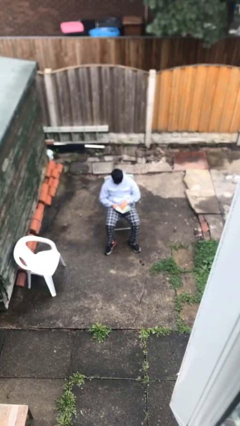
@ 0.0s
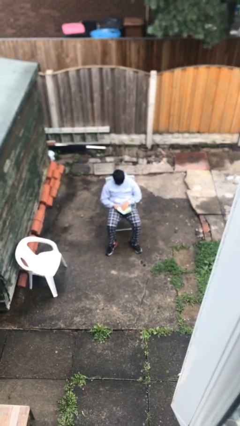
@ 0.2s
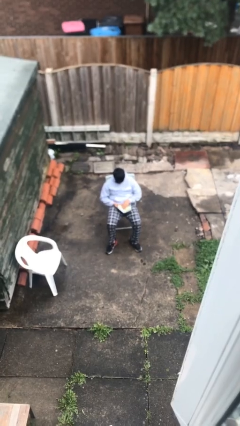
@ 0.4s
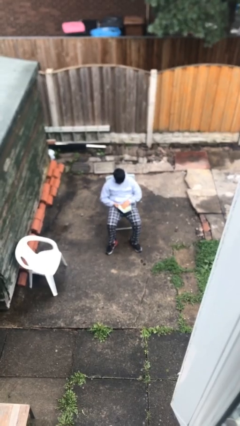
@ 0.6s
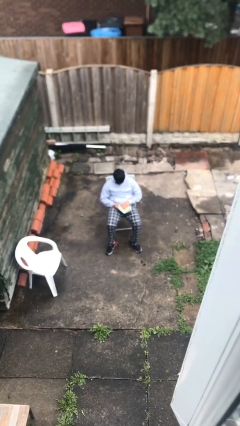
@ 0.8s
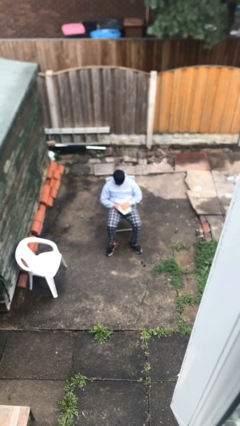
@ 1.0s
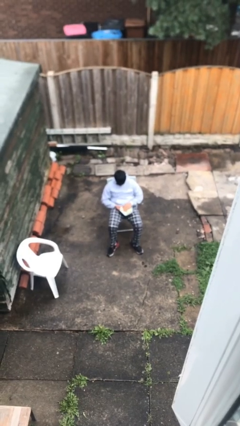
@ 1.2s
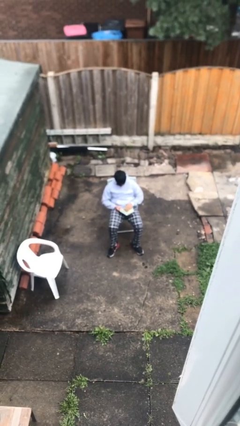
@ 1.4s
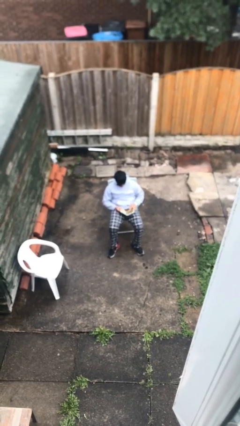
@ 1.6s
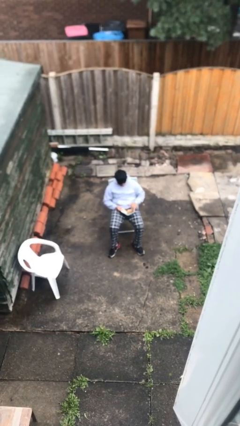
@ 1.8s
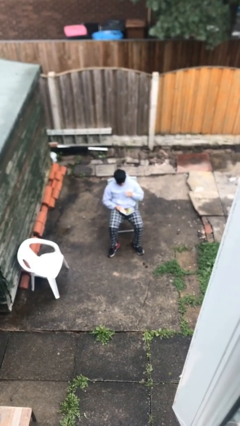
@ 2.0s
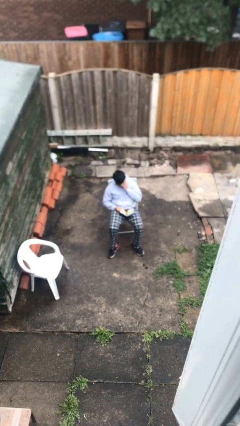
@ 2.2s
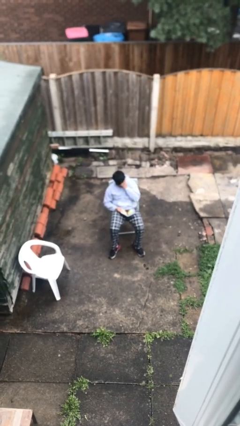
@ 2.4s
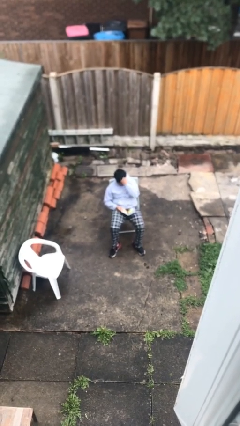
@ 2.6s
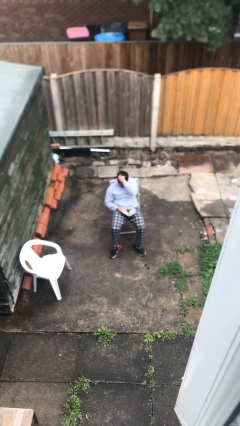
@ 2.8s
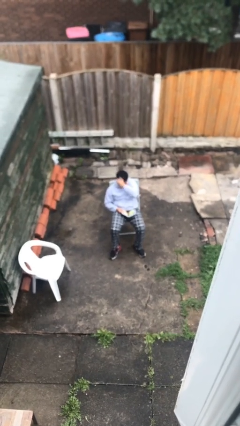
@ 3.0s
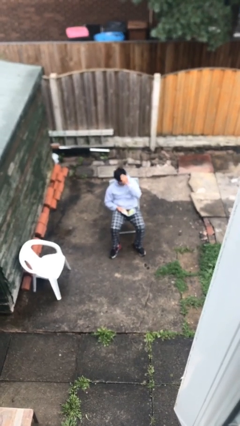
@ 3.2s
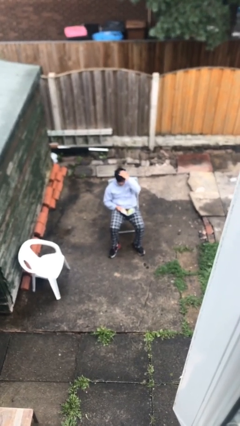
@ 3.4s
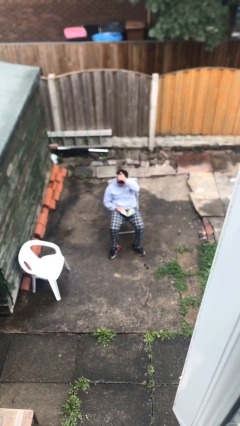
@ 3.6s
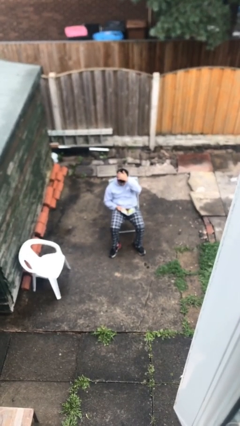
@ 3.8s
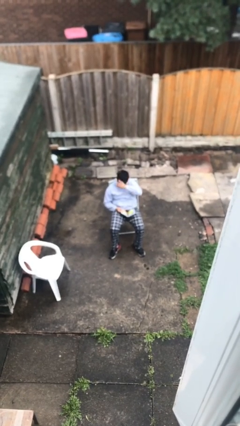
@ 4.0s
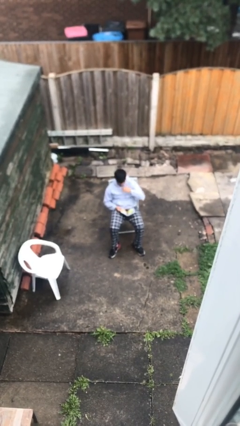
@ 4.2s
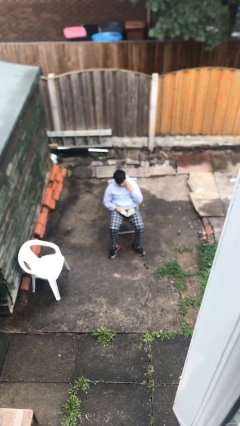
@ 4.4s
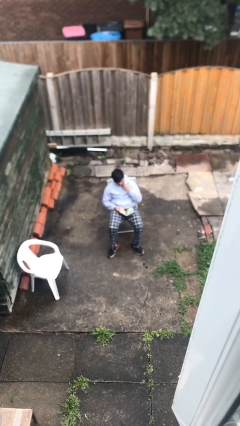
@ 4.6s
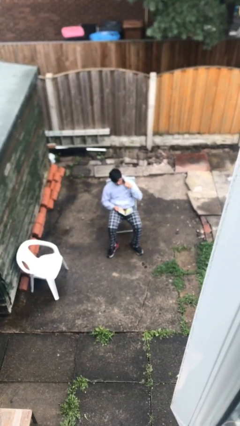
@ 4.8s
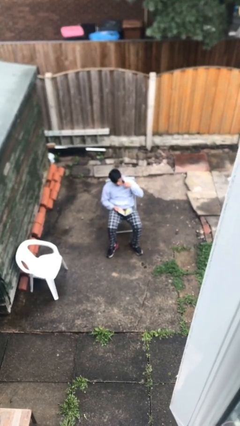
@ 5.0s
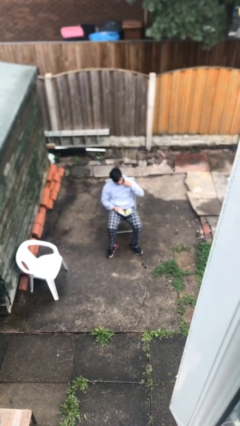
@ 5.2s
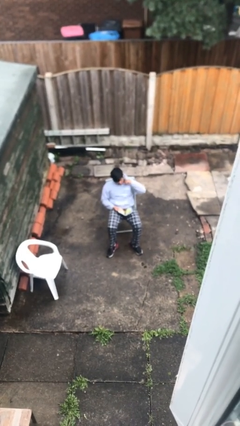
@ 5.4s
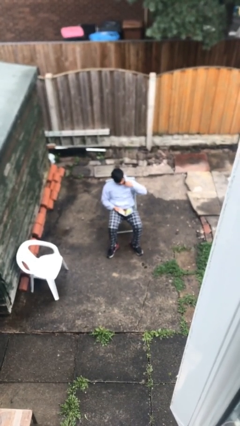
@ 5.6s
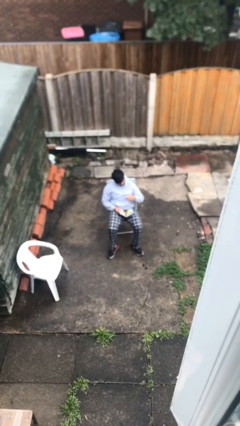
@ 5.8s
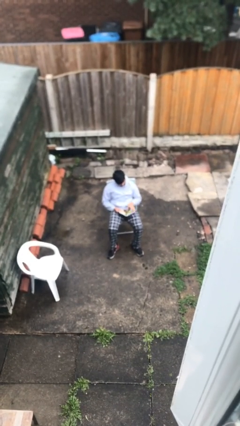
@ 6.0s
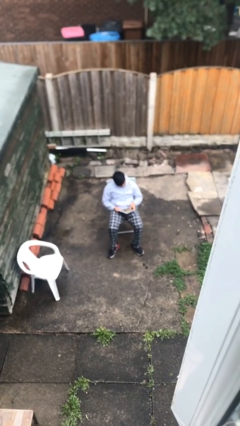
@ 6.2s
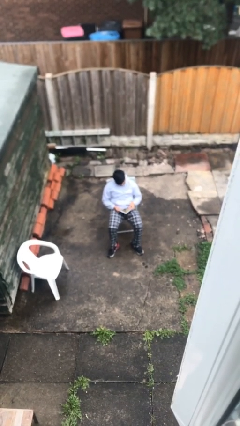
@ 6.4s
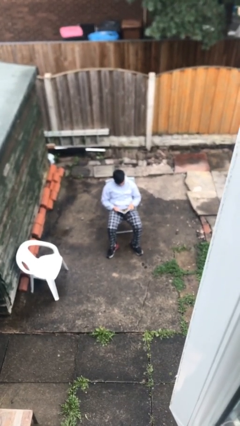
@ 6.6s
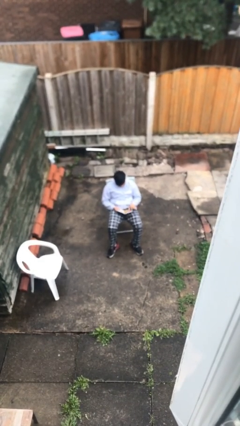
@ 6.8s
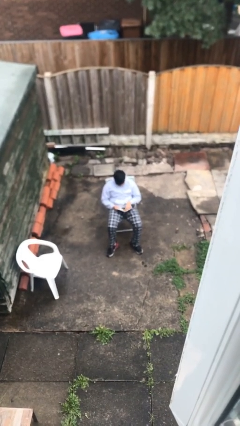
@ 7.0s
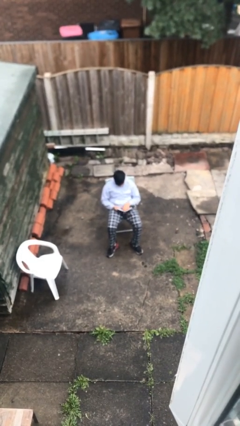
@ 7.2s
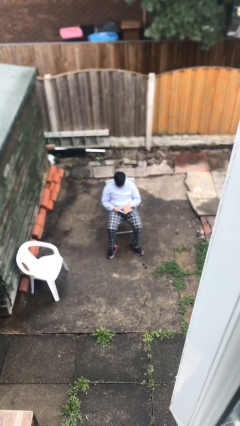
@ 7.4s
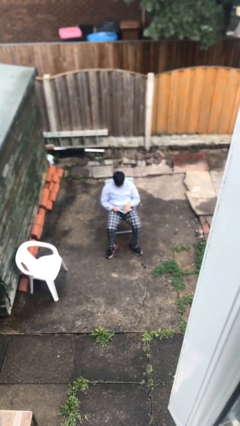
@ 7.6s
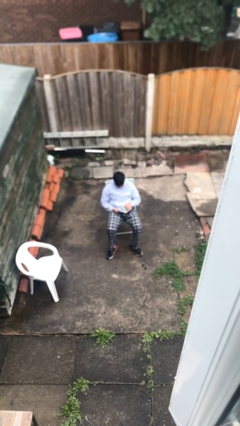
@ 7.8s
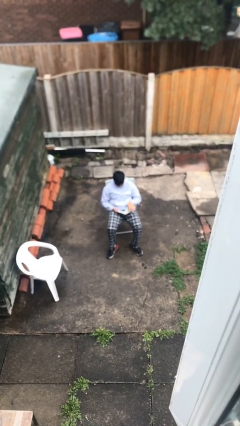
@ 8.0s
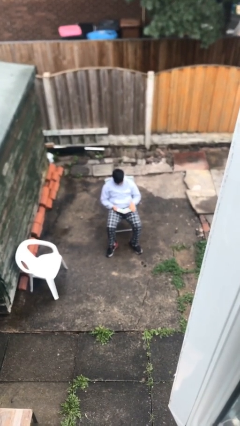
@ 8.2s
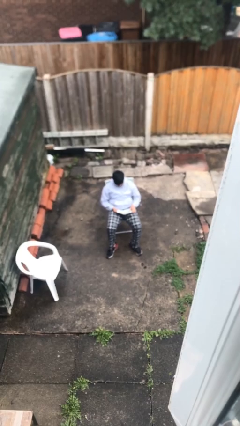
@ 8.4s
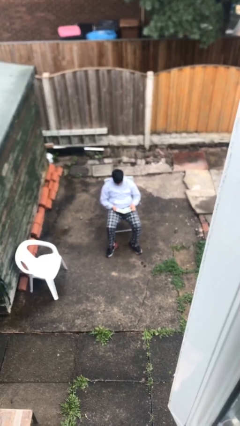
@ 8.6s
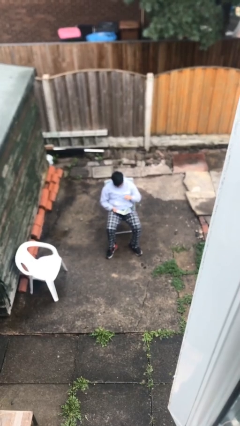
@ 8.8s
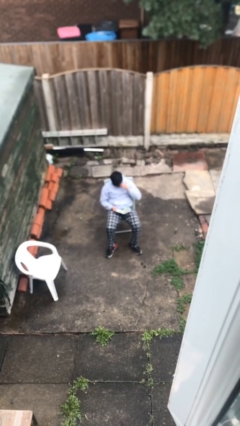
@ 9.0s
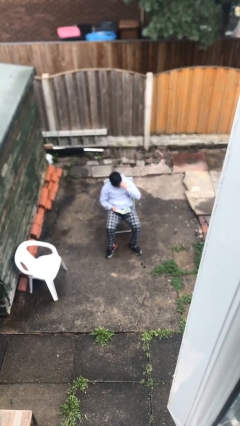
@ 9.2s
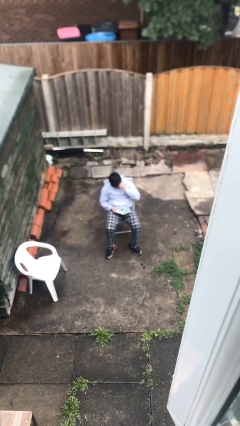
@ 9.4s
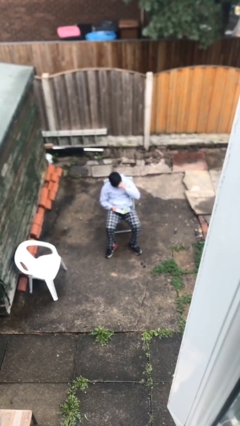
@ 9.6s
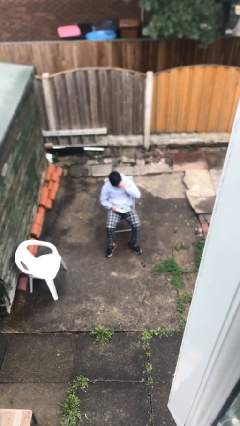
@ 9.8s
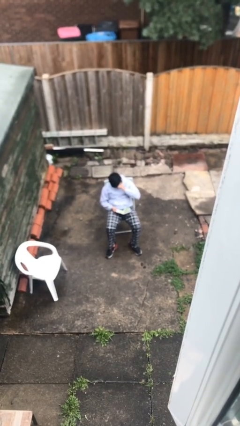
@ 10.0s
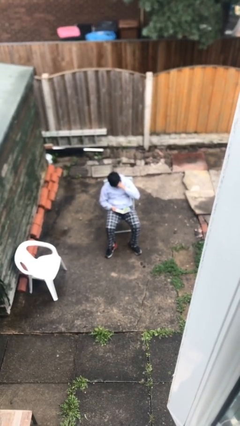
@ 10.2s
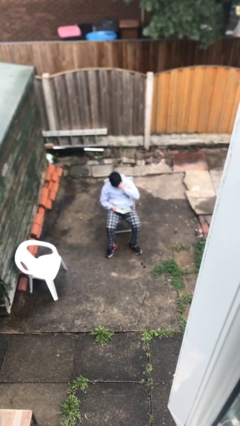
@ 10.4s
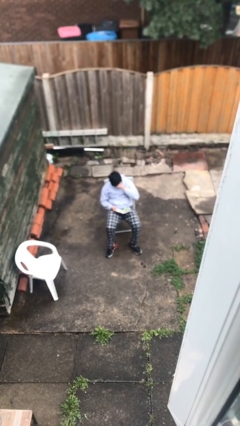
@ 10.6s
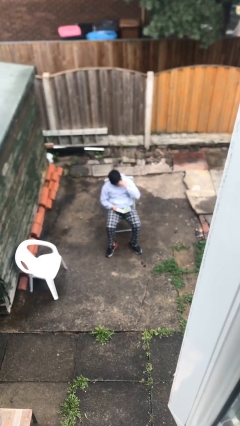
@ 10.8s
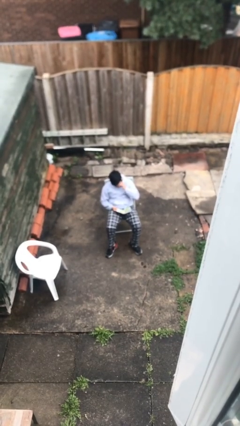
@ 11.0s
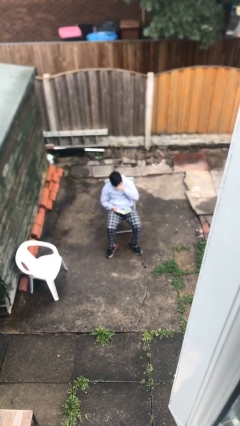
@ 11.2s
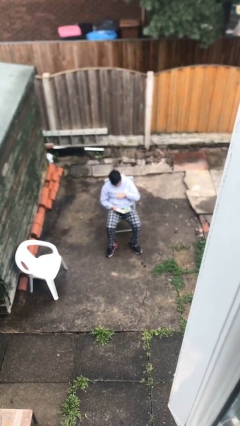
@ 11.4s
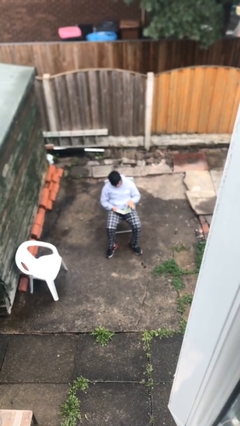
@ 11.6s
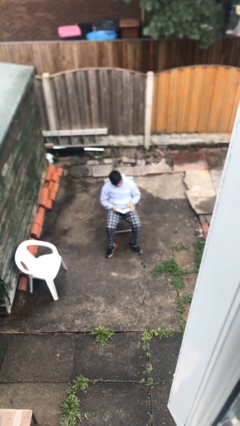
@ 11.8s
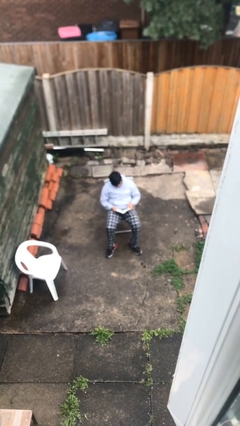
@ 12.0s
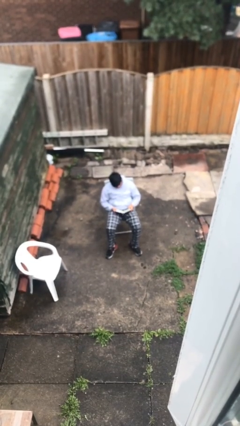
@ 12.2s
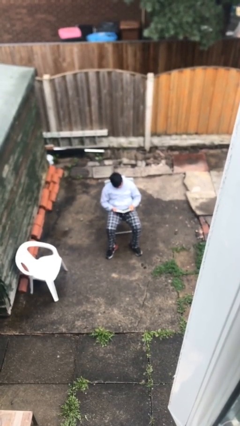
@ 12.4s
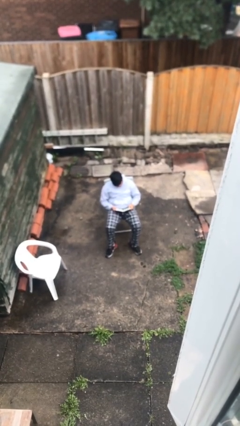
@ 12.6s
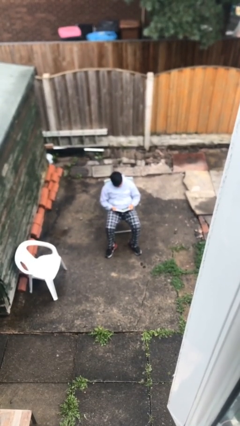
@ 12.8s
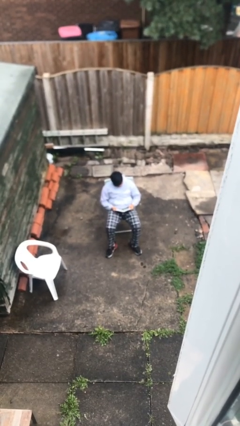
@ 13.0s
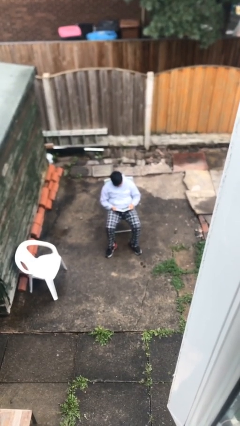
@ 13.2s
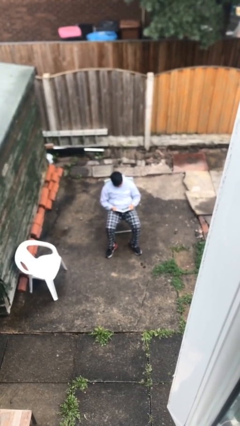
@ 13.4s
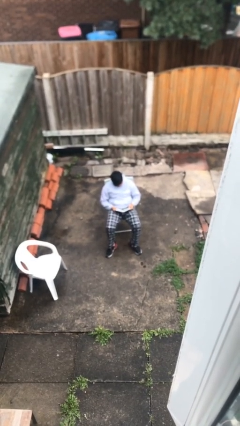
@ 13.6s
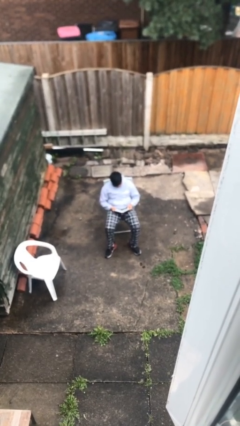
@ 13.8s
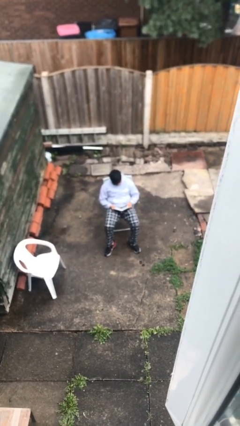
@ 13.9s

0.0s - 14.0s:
person reads document

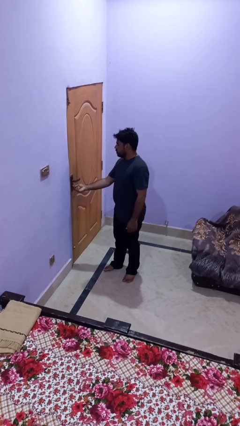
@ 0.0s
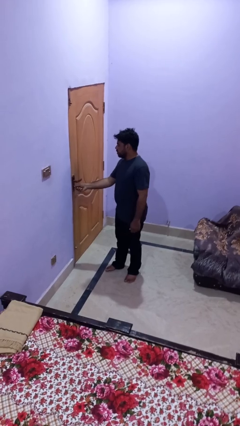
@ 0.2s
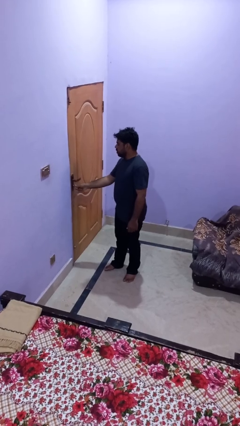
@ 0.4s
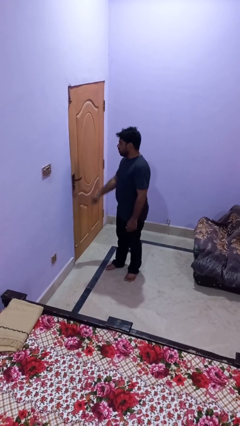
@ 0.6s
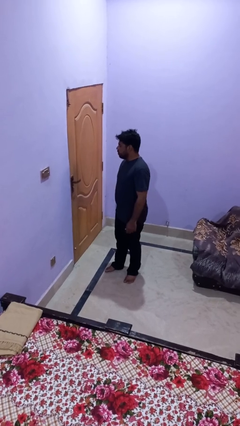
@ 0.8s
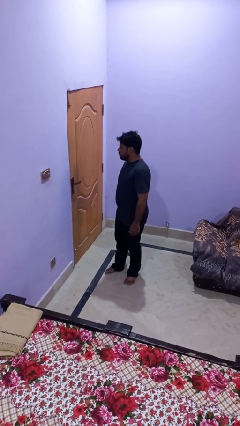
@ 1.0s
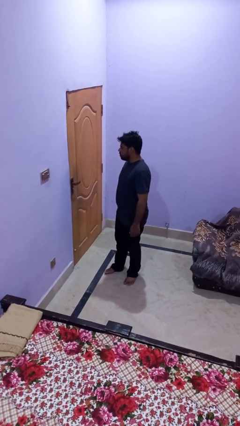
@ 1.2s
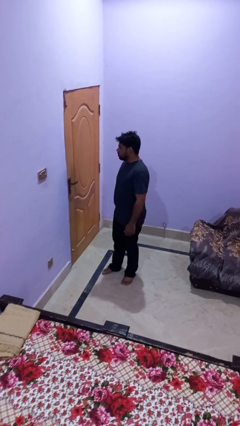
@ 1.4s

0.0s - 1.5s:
person locks door with keys

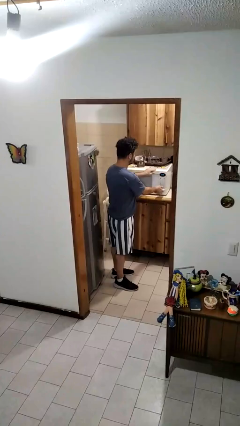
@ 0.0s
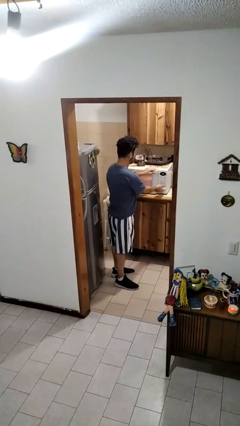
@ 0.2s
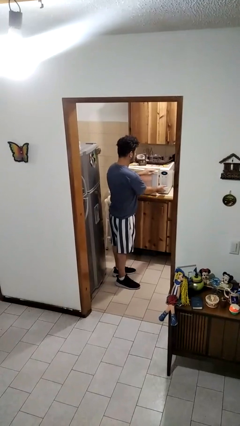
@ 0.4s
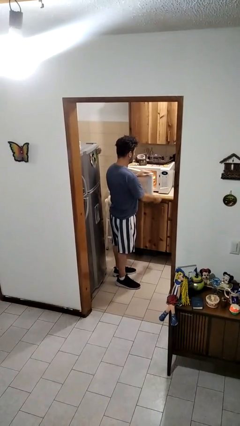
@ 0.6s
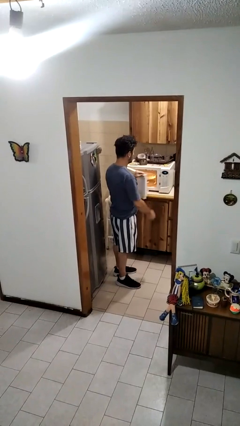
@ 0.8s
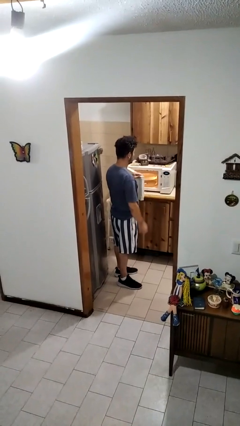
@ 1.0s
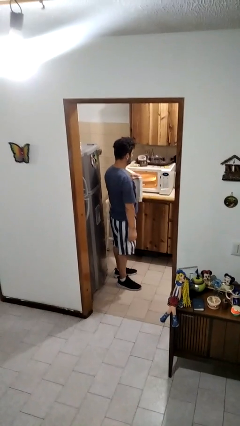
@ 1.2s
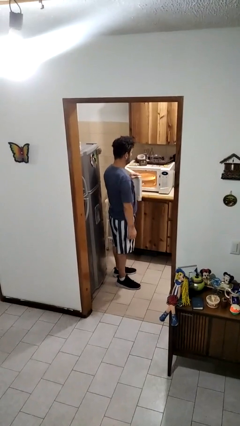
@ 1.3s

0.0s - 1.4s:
person opens microwave

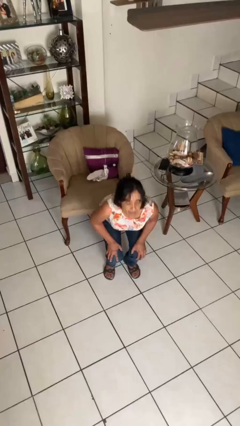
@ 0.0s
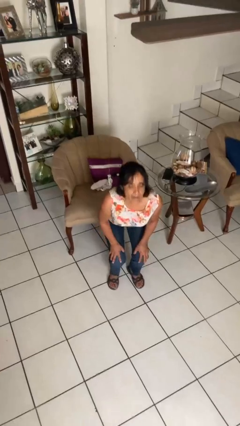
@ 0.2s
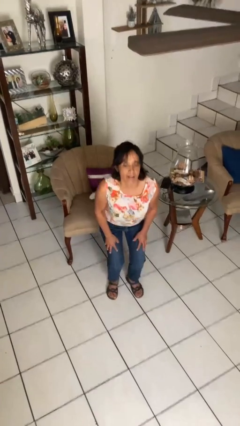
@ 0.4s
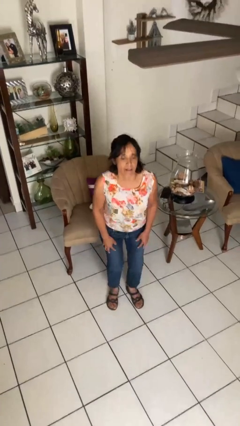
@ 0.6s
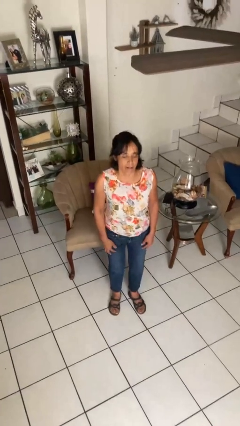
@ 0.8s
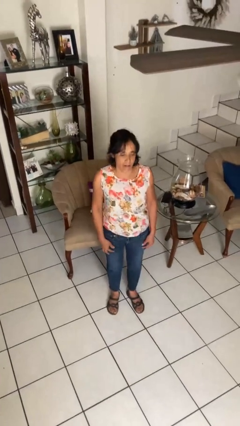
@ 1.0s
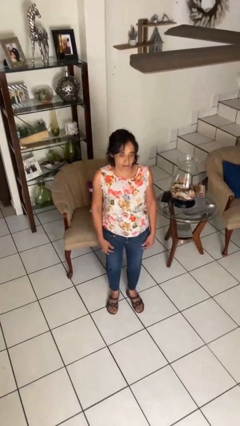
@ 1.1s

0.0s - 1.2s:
person stands up
